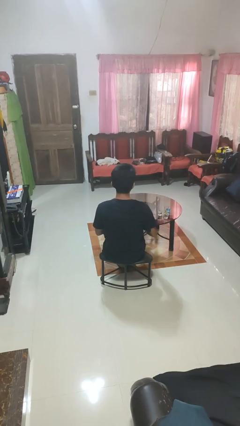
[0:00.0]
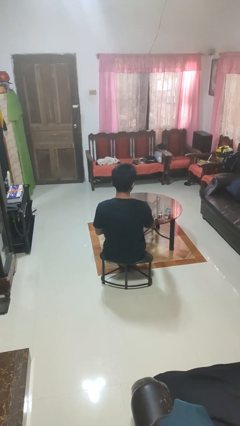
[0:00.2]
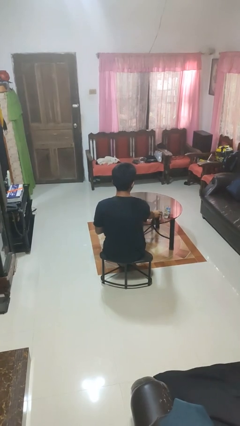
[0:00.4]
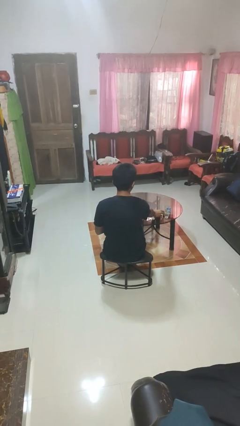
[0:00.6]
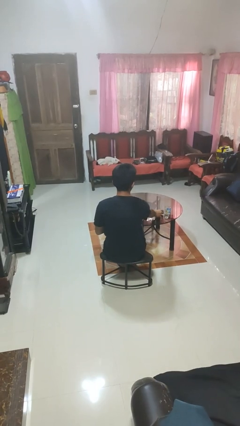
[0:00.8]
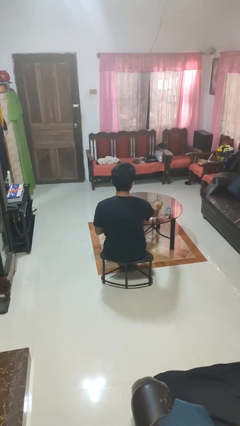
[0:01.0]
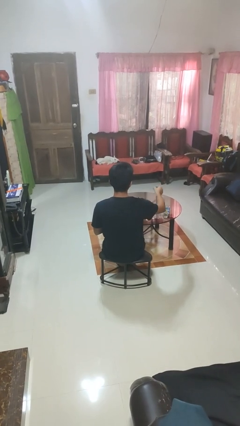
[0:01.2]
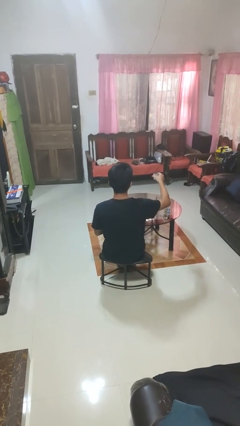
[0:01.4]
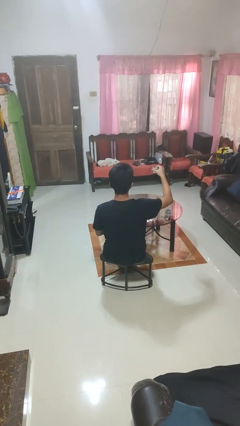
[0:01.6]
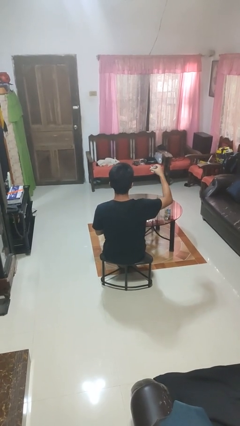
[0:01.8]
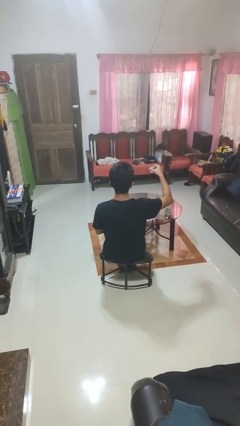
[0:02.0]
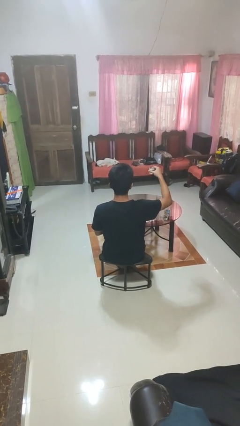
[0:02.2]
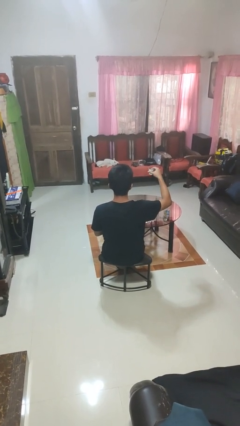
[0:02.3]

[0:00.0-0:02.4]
person picks up object from table

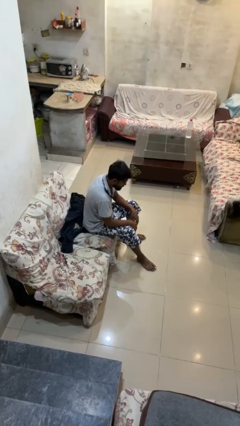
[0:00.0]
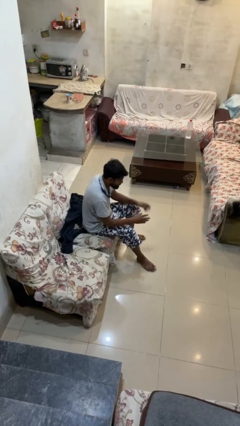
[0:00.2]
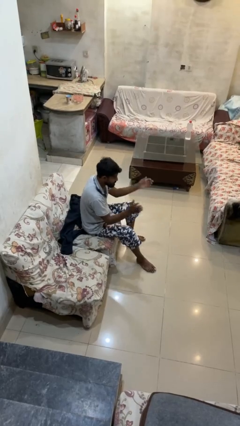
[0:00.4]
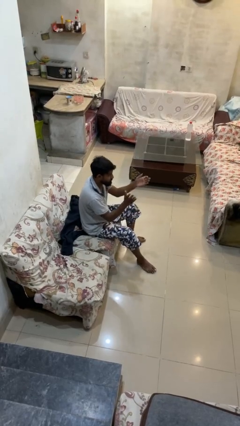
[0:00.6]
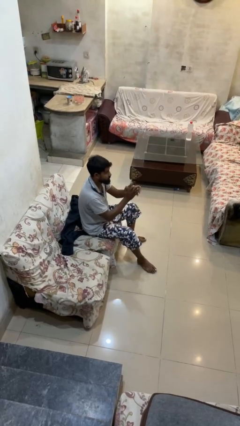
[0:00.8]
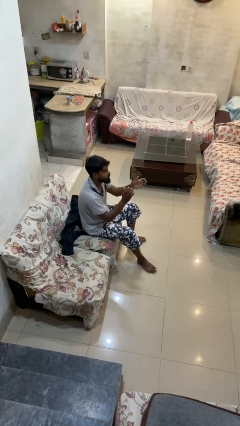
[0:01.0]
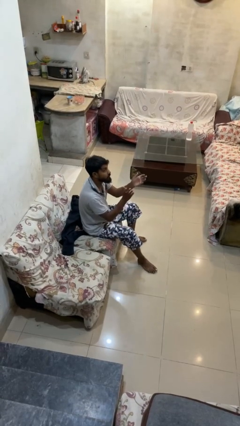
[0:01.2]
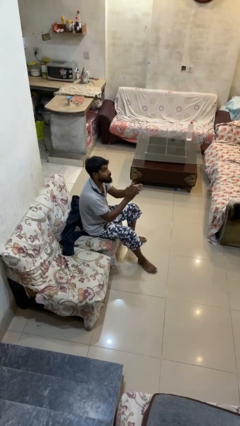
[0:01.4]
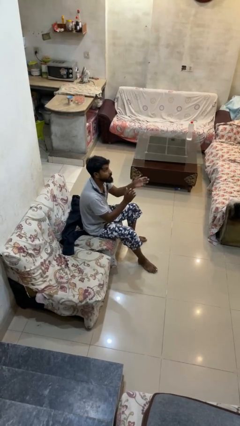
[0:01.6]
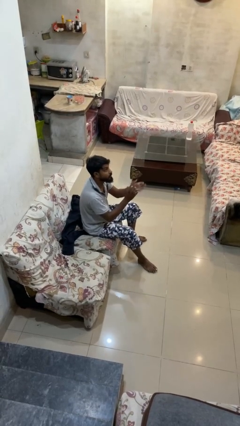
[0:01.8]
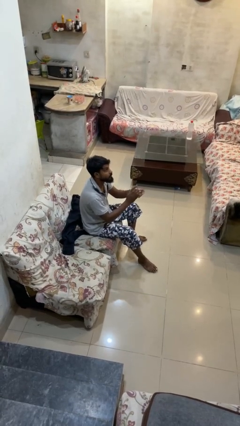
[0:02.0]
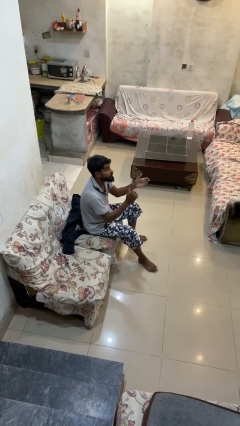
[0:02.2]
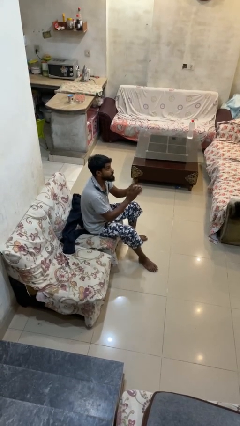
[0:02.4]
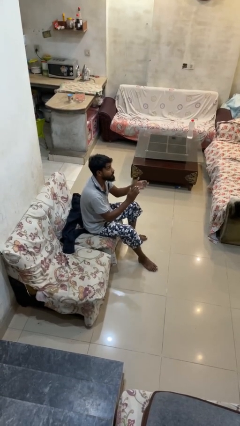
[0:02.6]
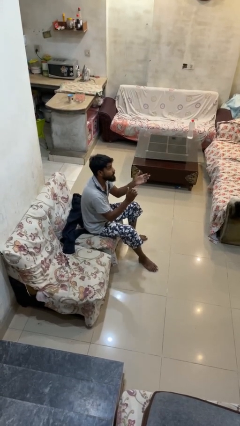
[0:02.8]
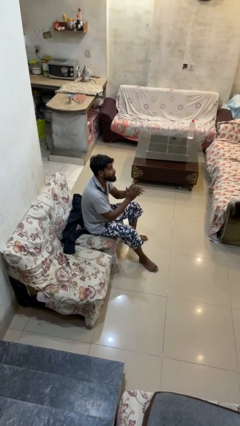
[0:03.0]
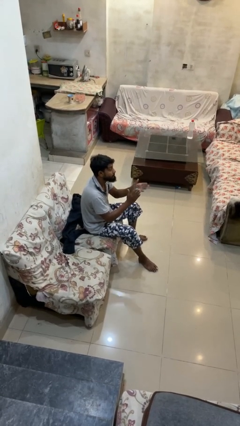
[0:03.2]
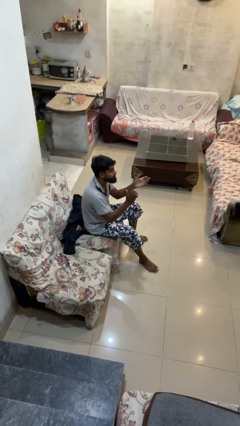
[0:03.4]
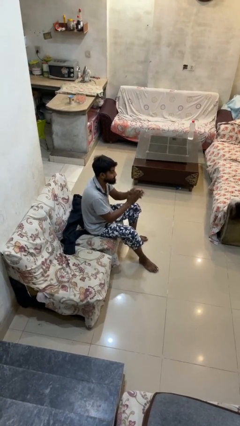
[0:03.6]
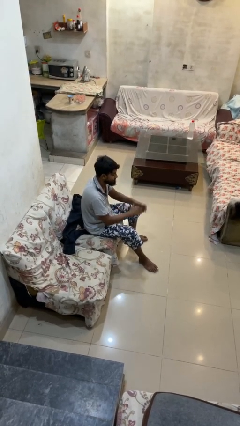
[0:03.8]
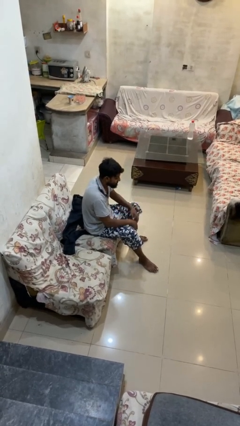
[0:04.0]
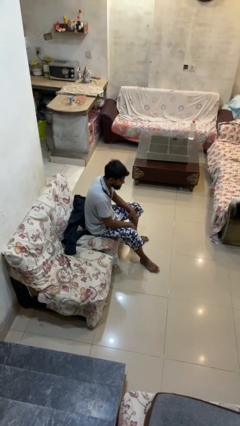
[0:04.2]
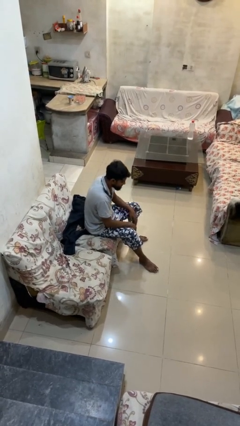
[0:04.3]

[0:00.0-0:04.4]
person claps hands

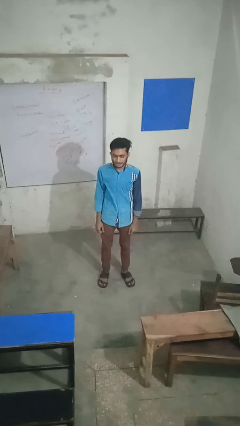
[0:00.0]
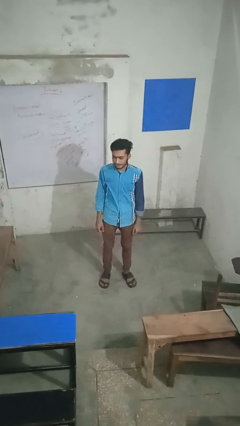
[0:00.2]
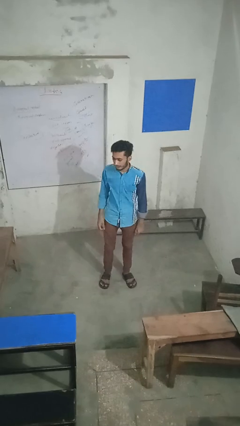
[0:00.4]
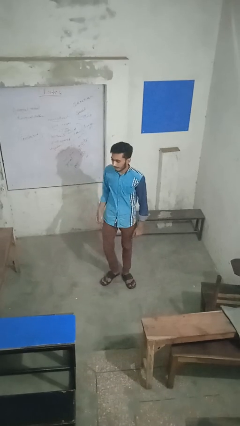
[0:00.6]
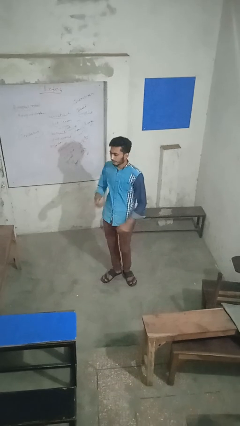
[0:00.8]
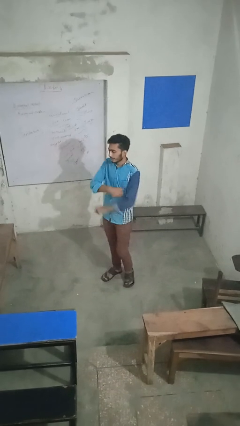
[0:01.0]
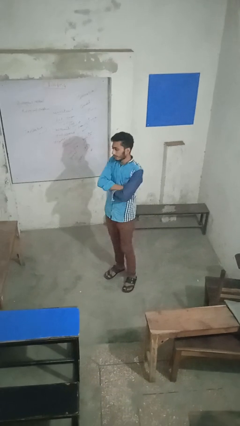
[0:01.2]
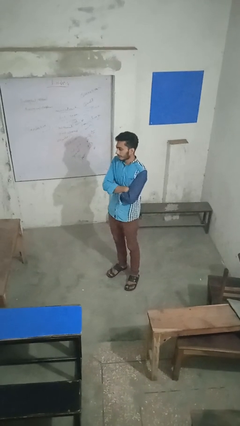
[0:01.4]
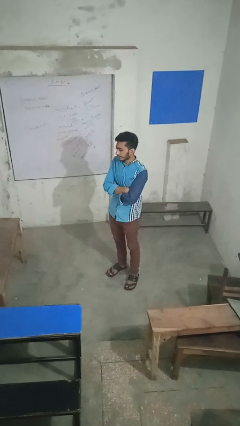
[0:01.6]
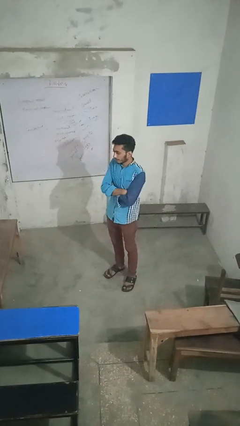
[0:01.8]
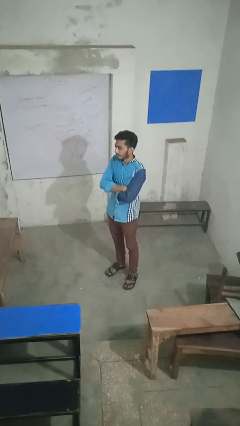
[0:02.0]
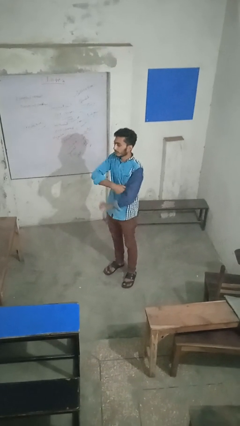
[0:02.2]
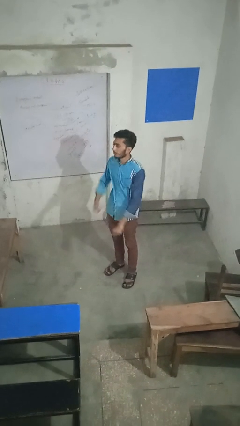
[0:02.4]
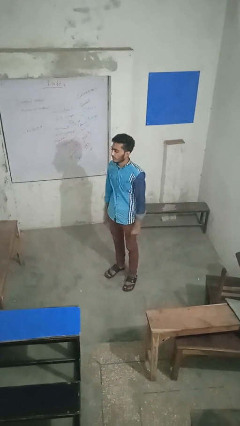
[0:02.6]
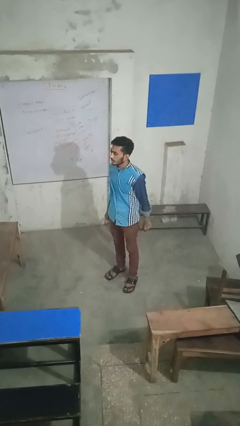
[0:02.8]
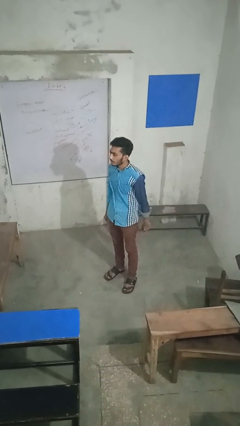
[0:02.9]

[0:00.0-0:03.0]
person crosses arms

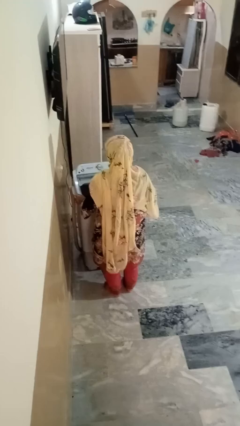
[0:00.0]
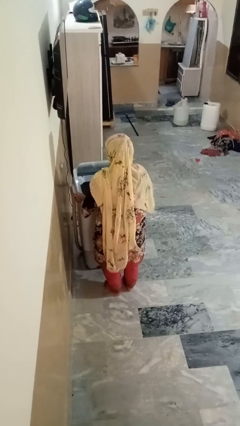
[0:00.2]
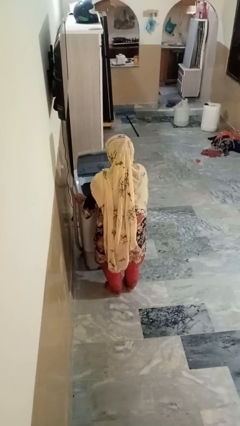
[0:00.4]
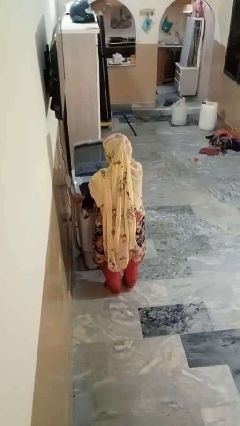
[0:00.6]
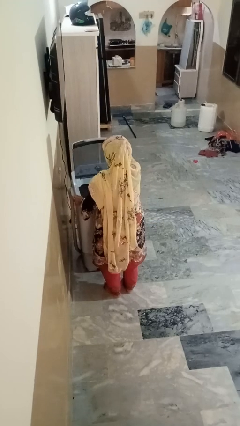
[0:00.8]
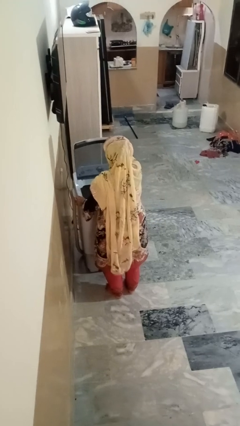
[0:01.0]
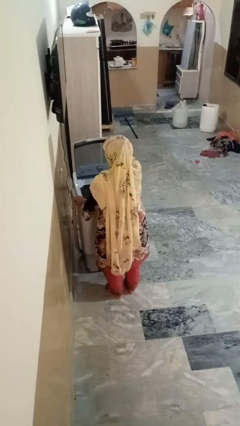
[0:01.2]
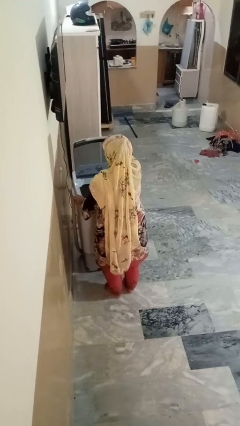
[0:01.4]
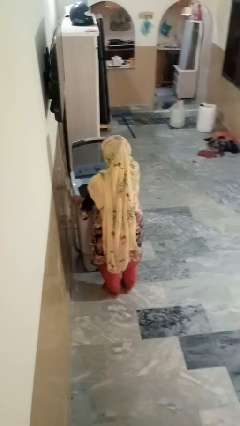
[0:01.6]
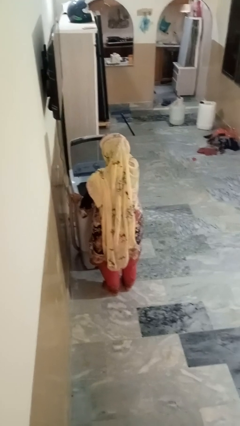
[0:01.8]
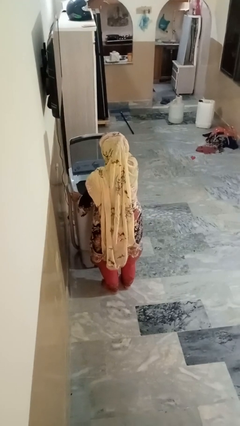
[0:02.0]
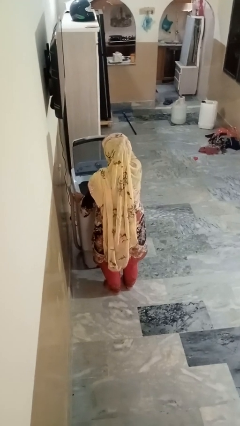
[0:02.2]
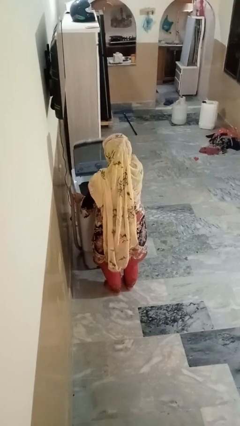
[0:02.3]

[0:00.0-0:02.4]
person opens clothes washer

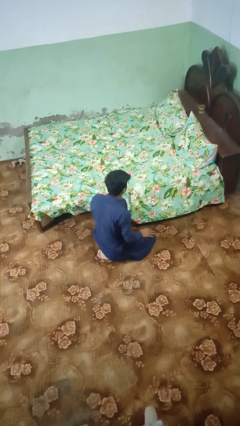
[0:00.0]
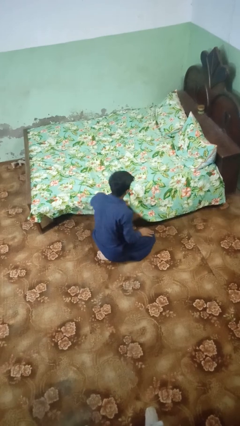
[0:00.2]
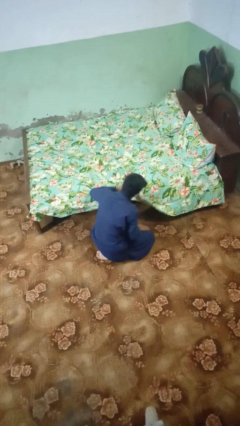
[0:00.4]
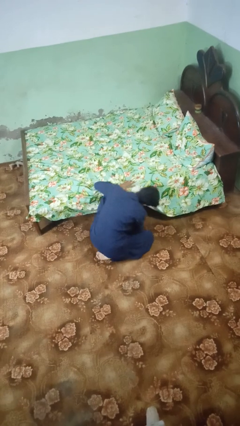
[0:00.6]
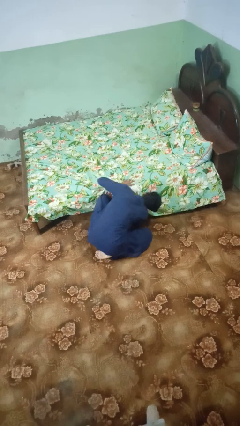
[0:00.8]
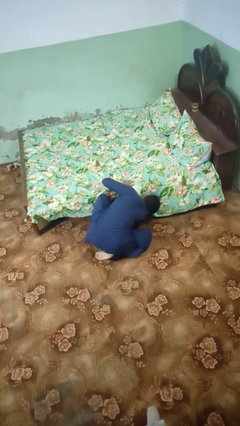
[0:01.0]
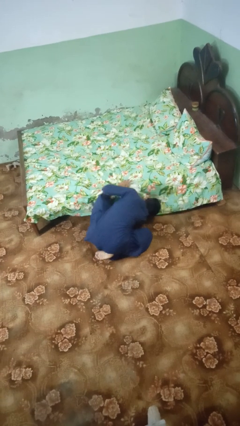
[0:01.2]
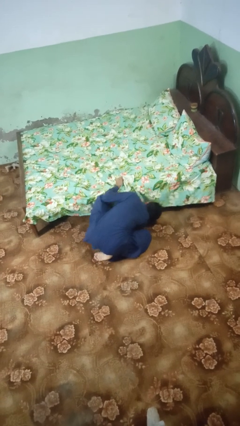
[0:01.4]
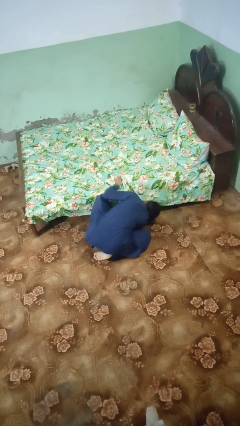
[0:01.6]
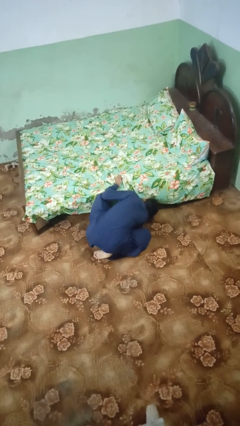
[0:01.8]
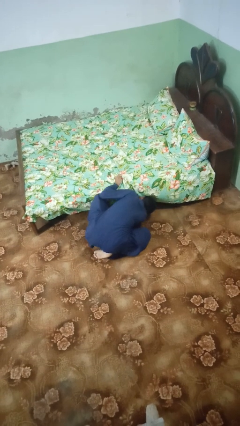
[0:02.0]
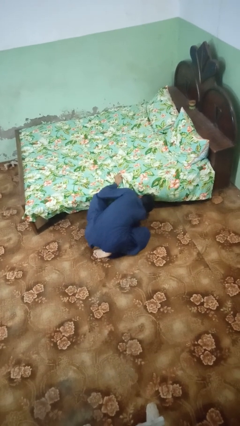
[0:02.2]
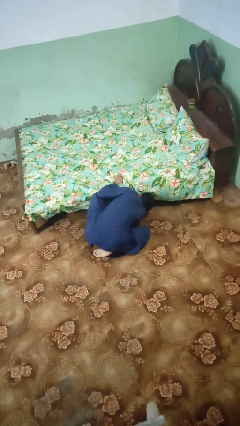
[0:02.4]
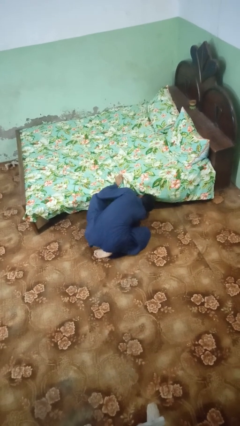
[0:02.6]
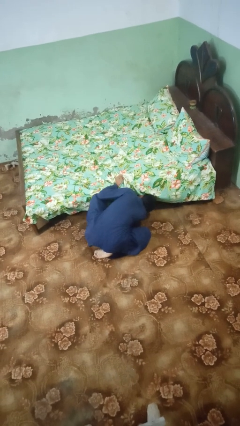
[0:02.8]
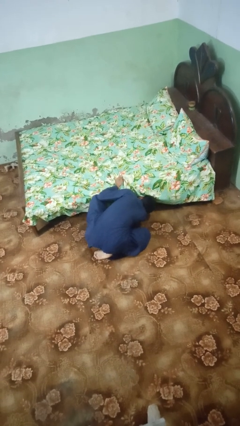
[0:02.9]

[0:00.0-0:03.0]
person searches under bed

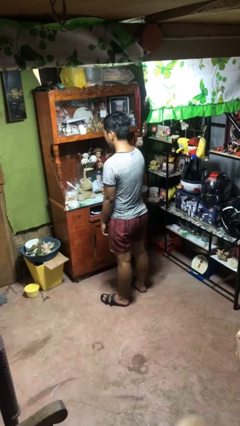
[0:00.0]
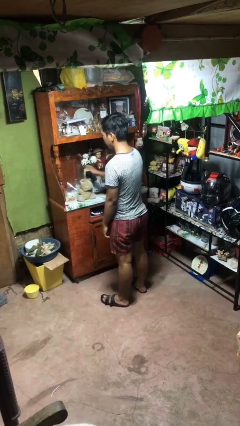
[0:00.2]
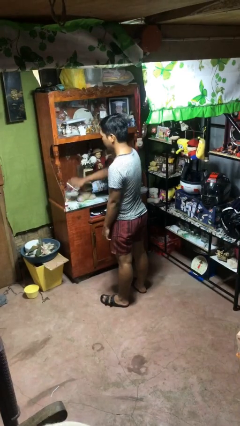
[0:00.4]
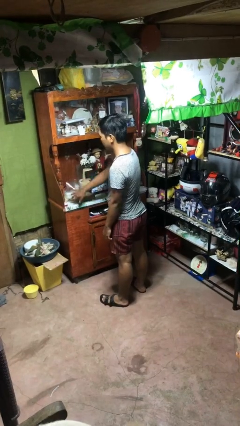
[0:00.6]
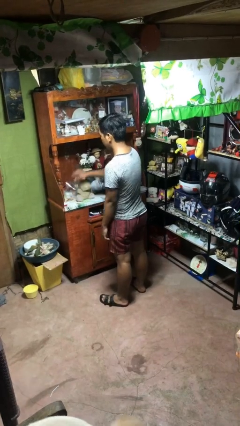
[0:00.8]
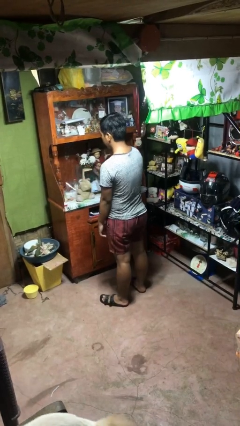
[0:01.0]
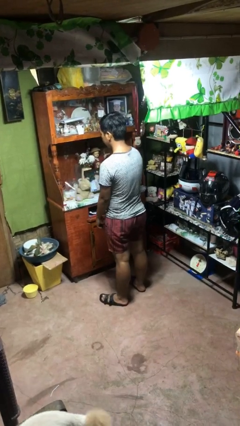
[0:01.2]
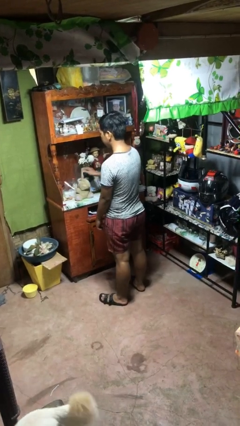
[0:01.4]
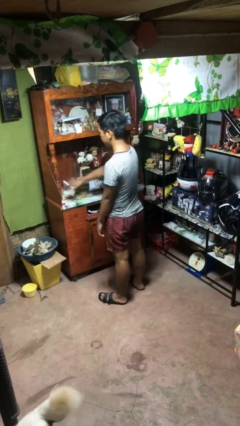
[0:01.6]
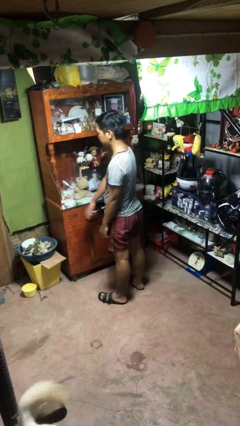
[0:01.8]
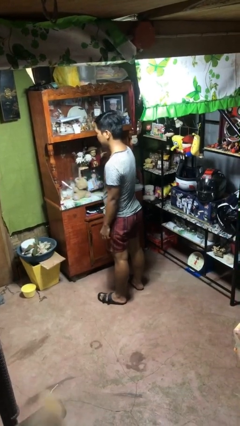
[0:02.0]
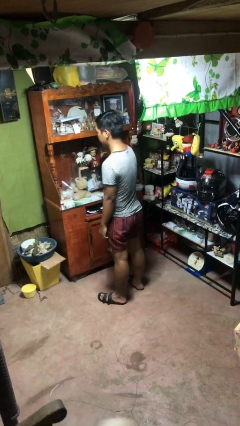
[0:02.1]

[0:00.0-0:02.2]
person waves hand over object
